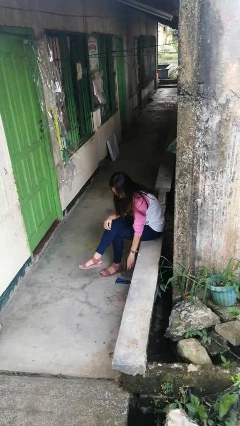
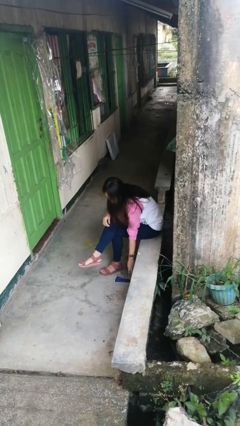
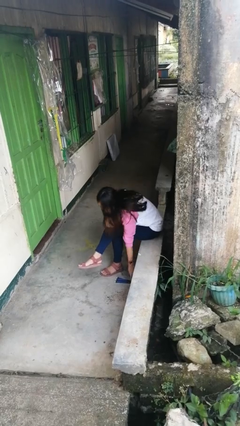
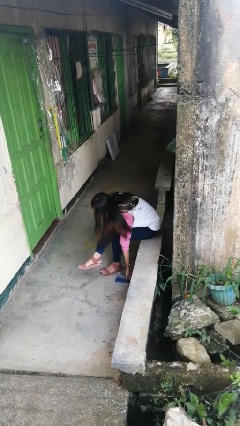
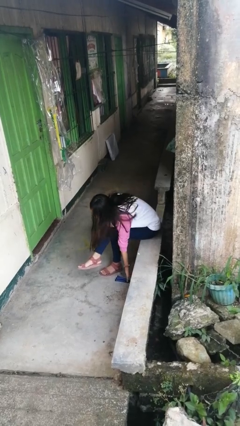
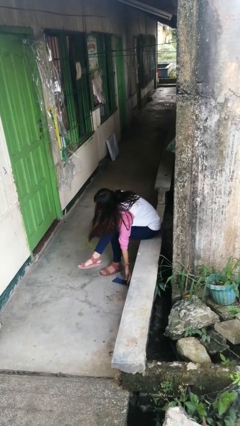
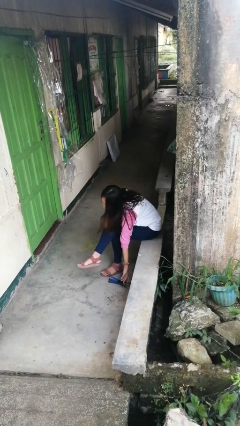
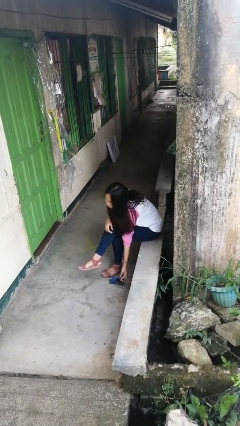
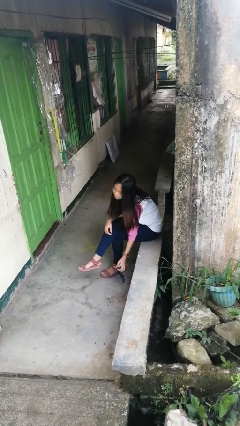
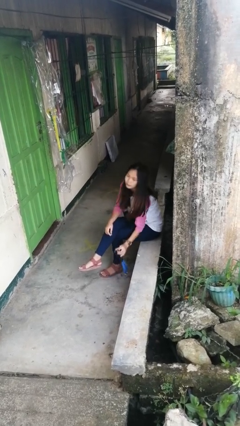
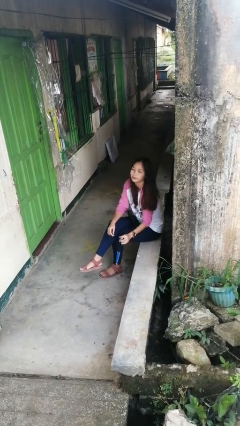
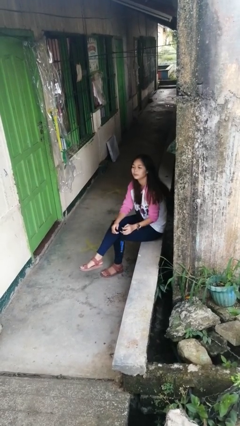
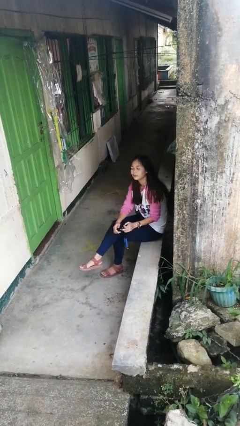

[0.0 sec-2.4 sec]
person picks up object from floor

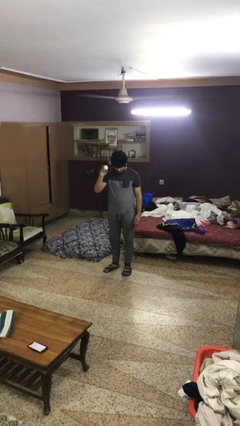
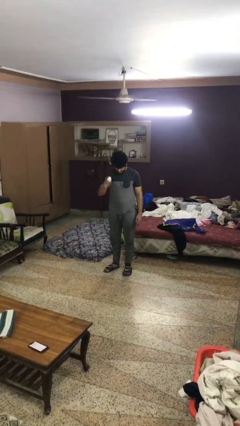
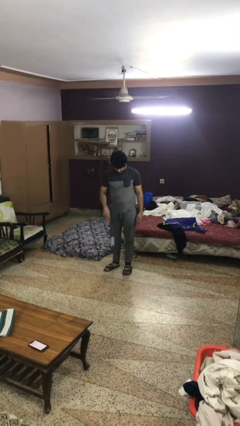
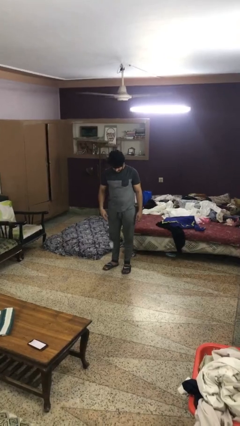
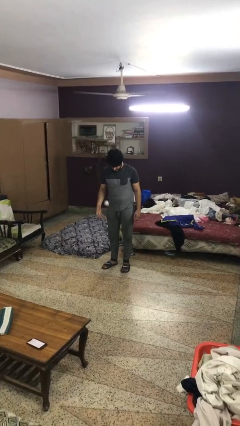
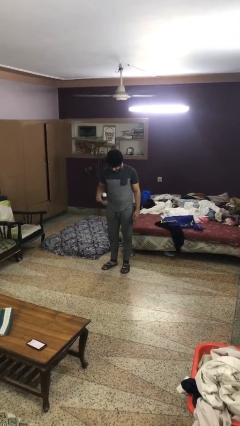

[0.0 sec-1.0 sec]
person bounces ball on floor

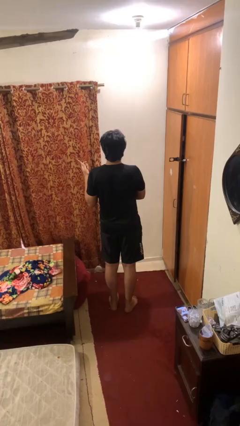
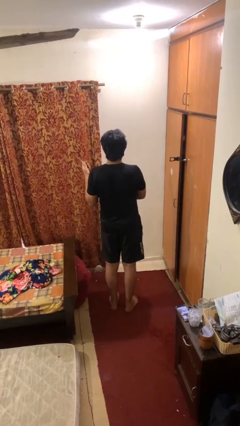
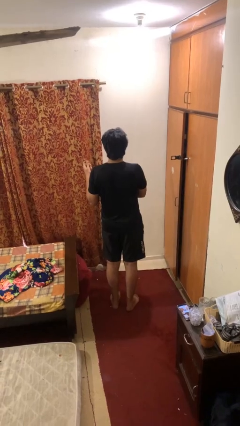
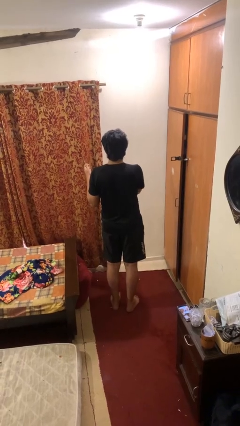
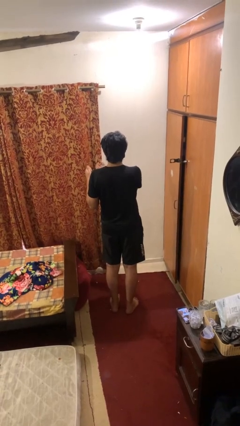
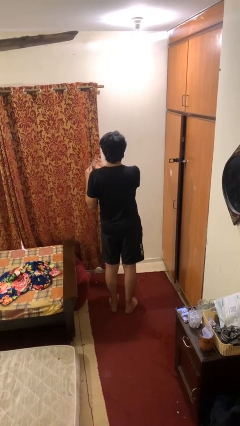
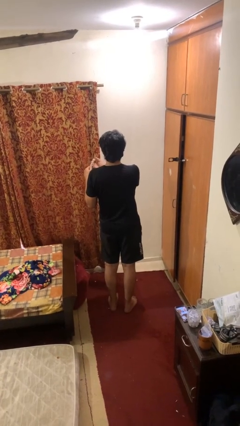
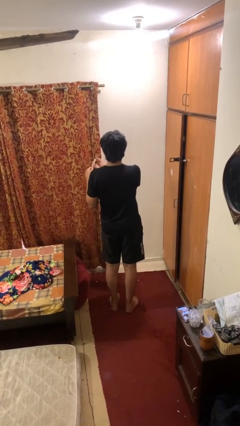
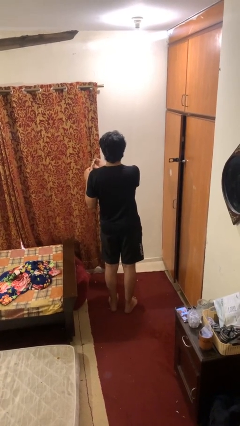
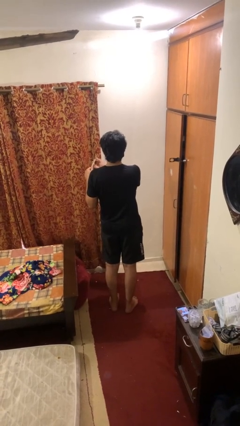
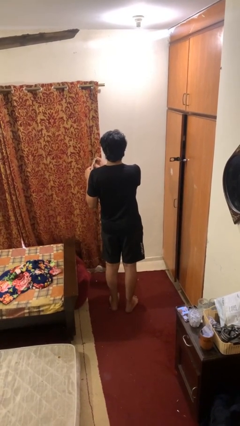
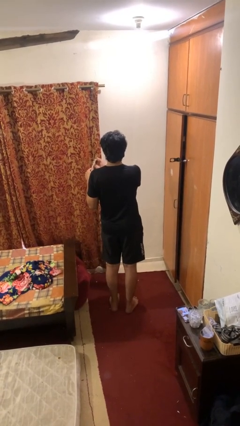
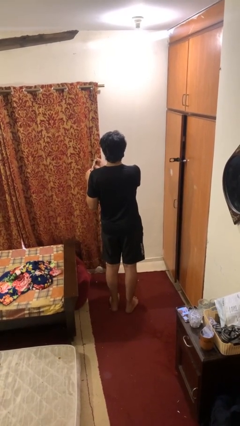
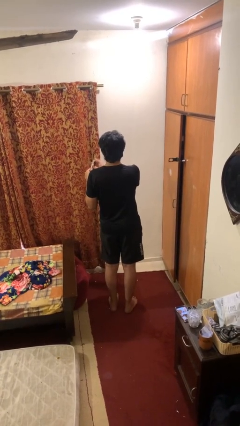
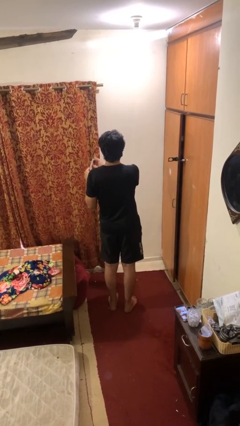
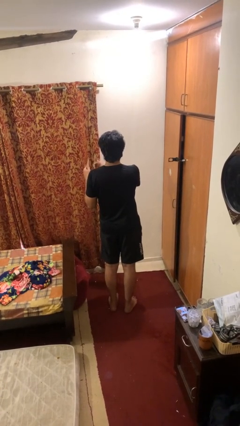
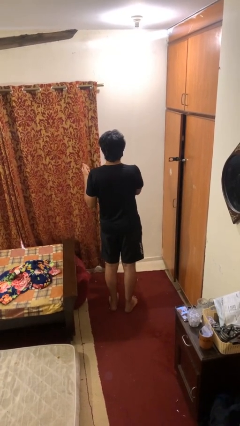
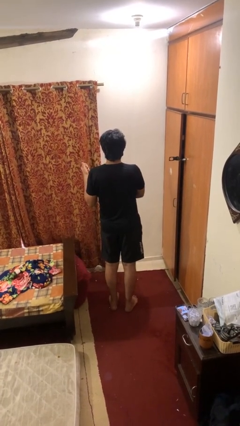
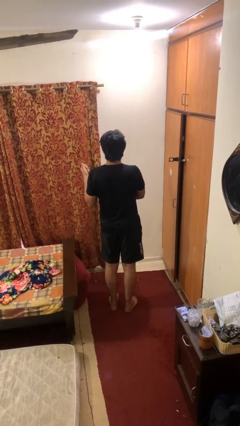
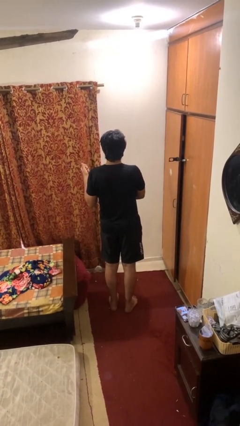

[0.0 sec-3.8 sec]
person files fingernails

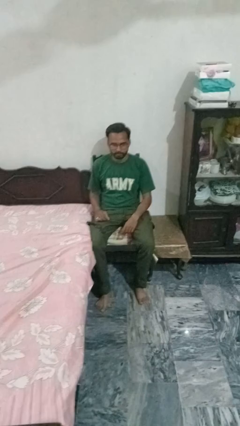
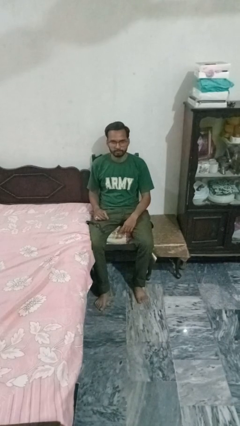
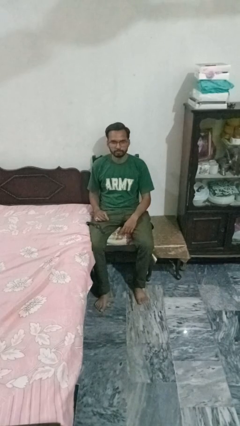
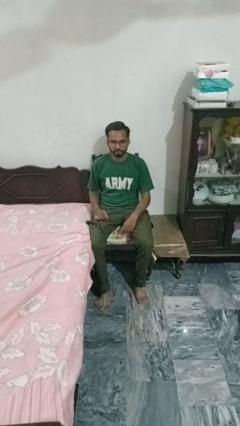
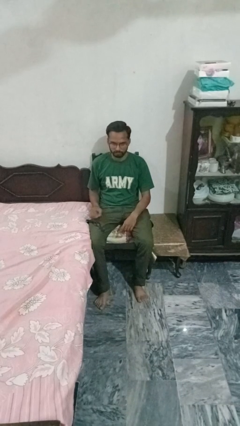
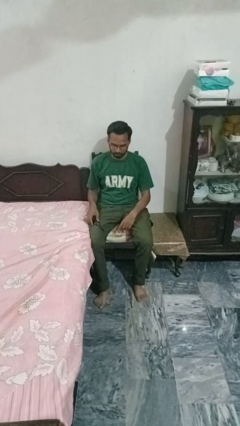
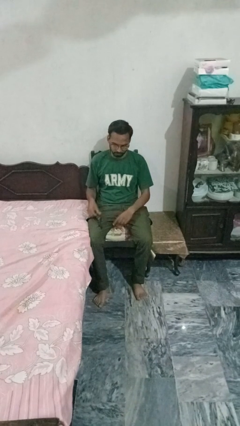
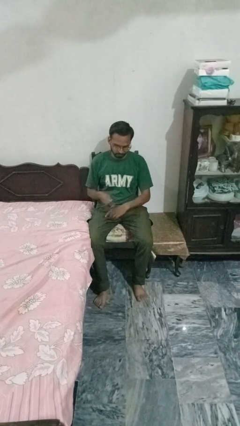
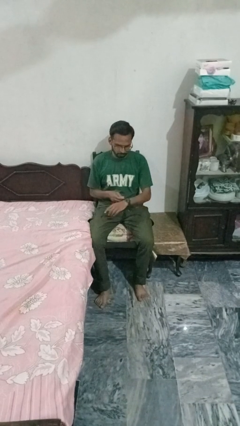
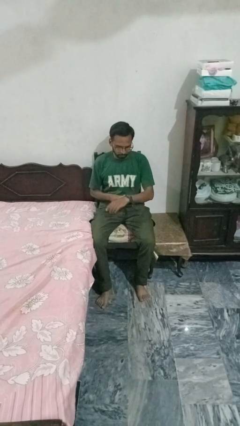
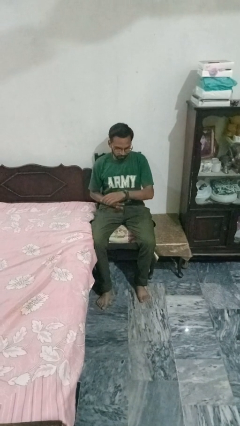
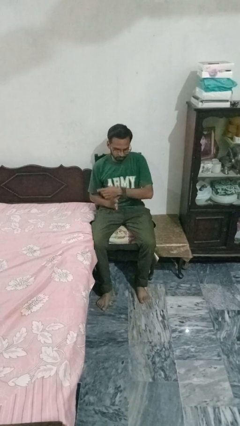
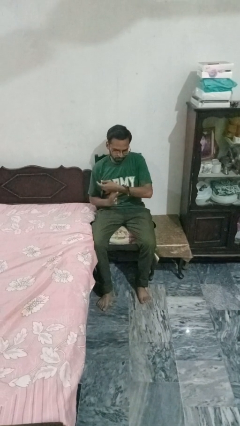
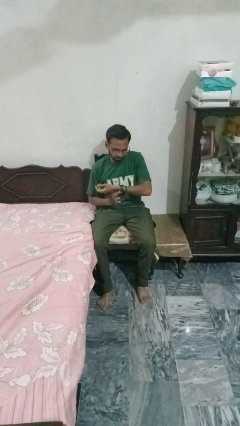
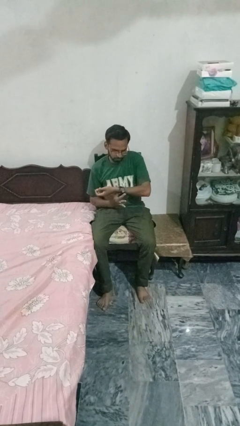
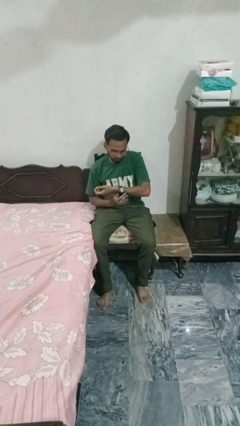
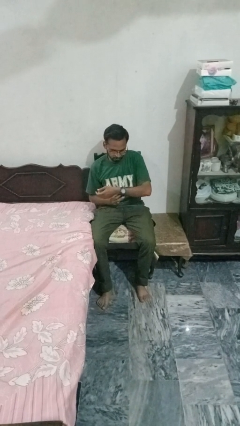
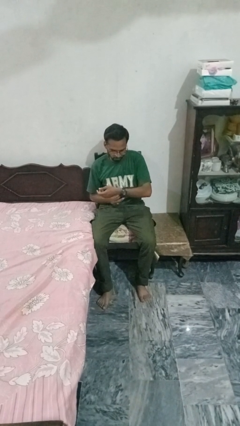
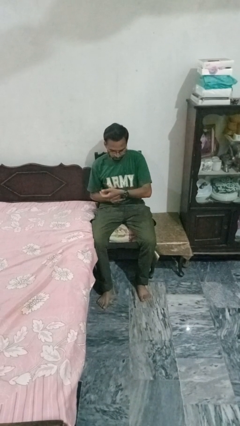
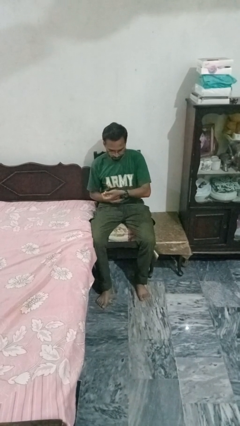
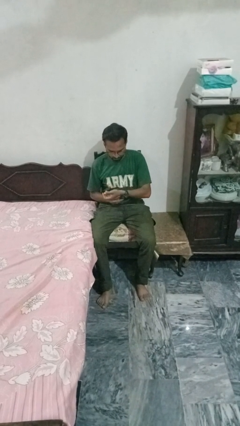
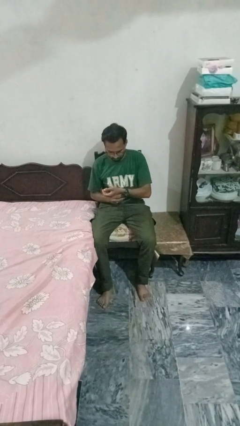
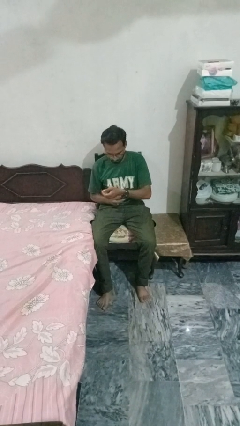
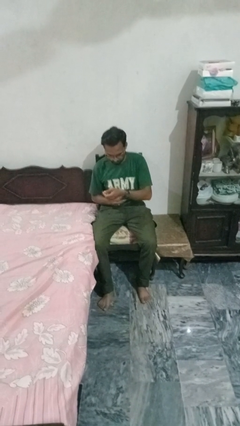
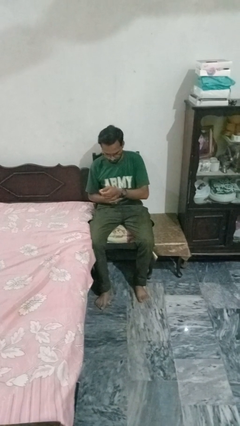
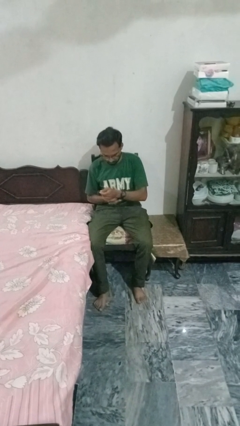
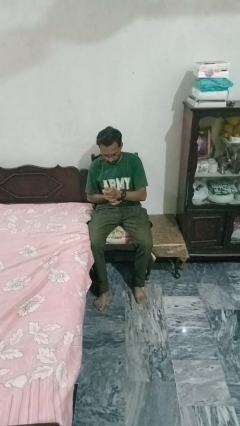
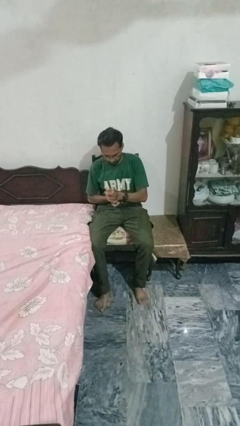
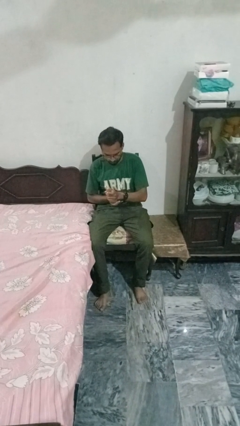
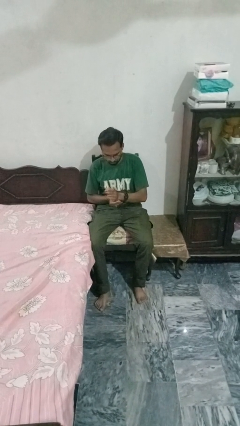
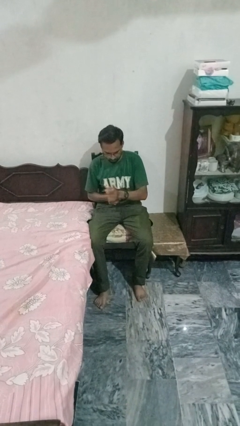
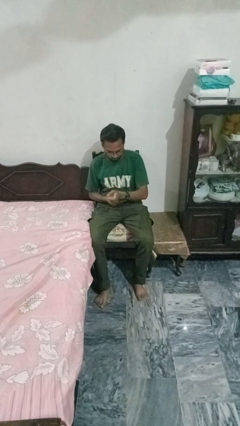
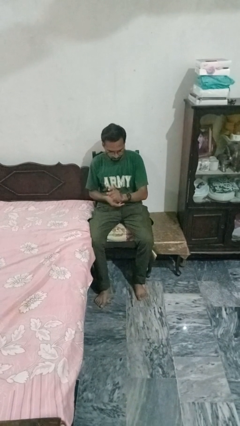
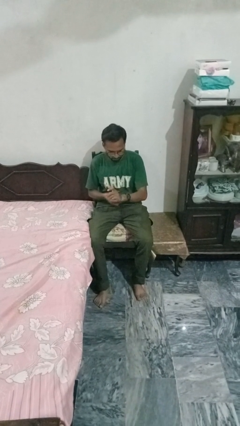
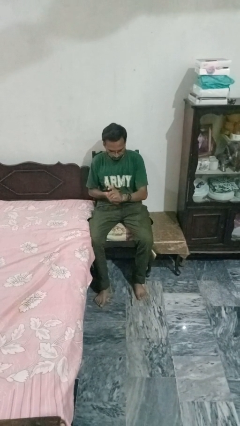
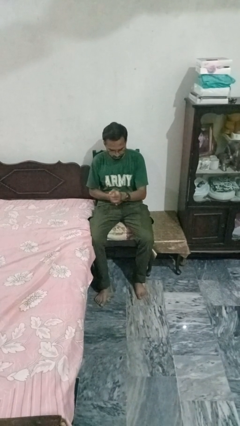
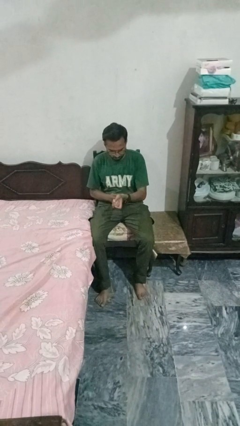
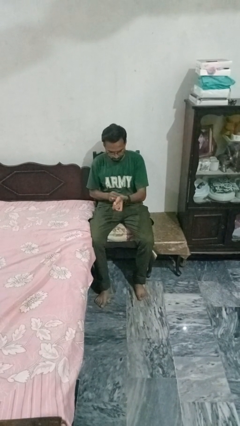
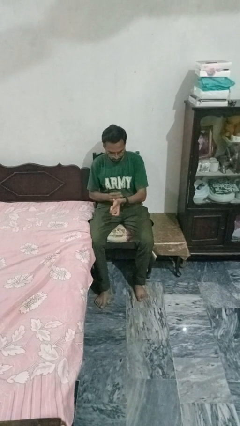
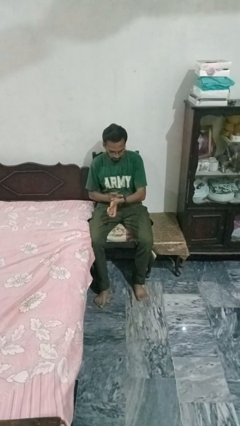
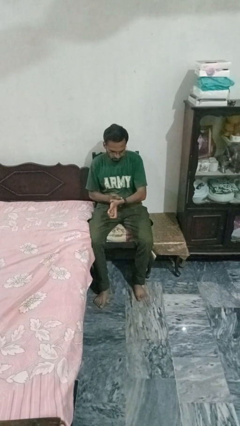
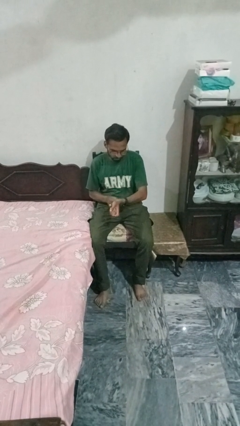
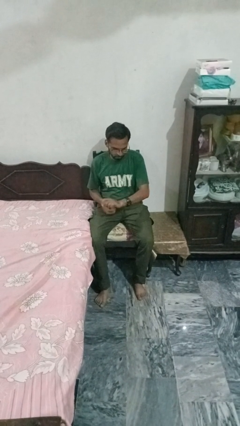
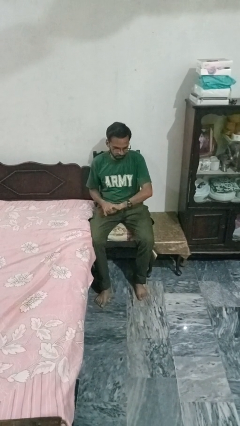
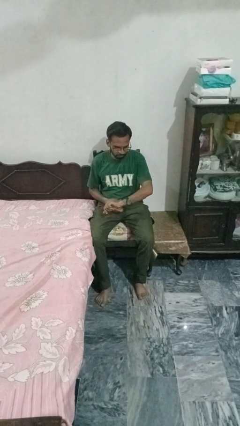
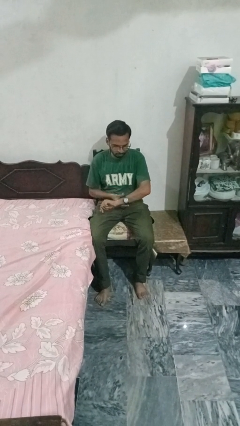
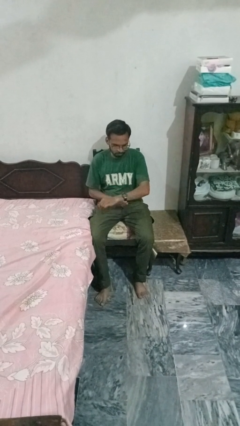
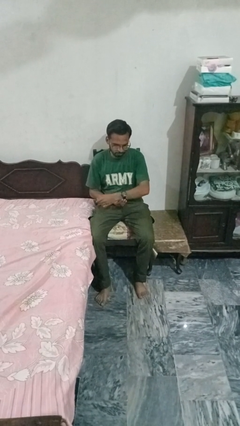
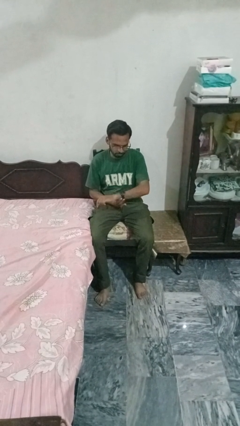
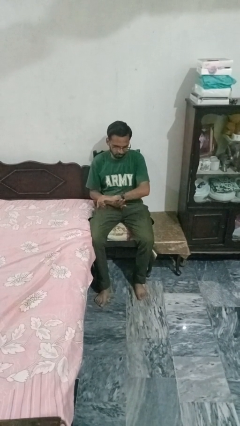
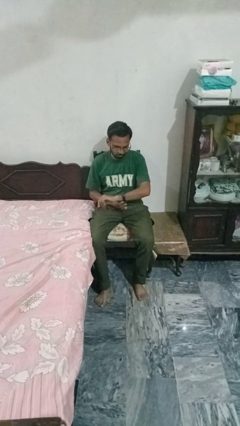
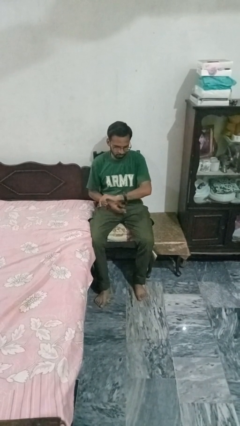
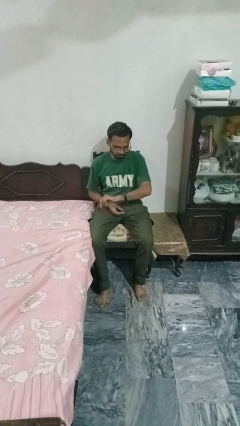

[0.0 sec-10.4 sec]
person puts on wristwatch

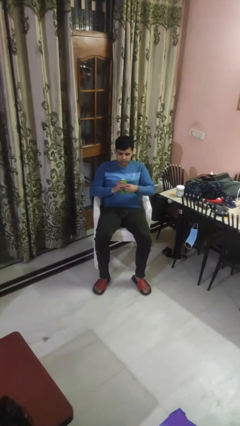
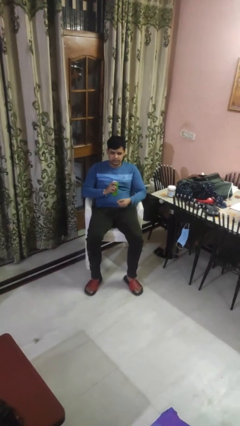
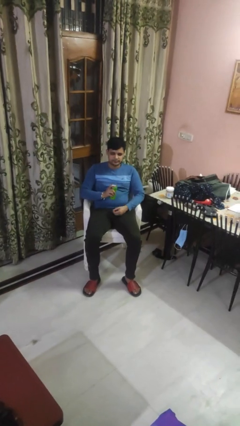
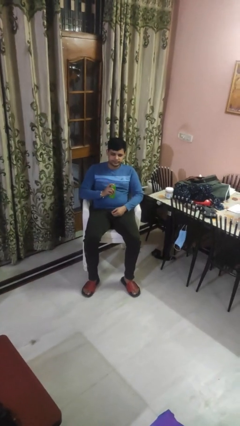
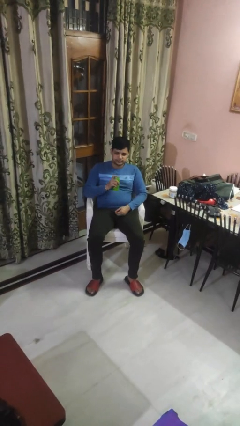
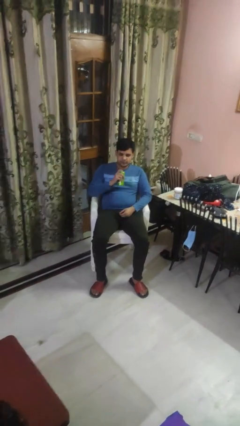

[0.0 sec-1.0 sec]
person opens beverage can
